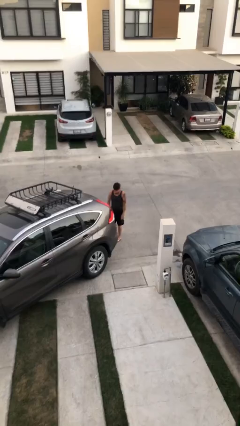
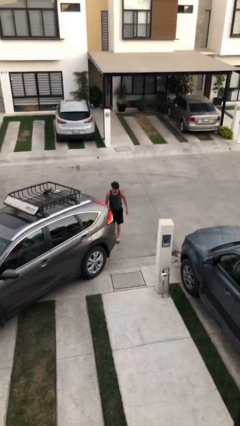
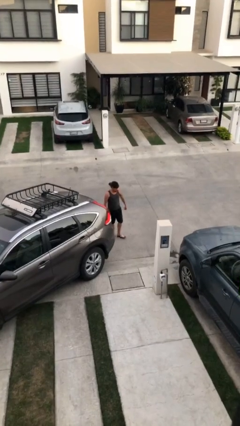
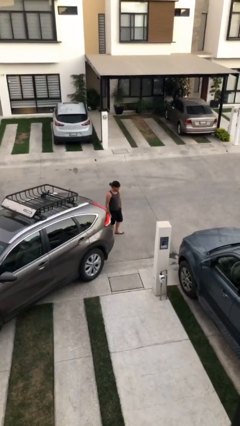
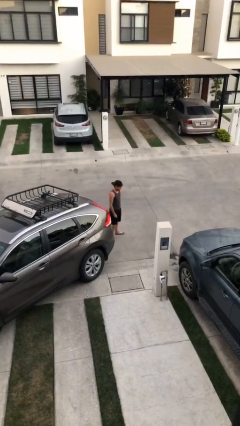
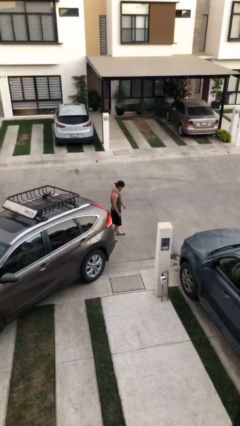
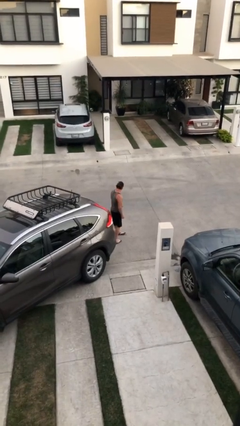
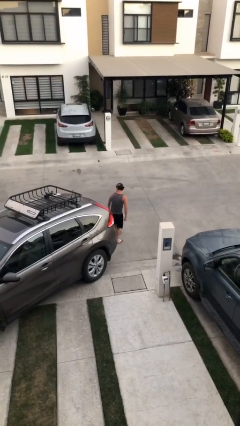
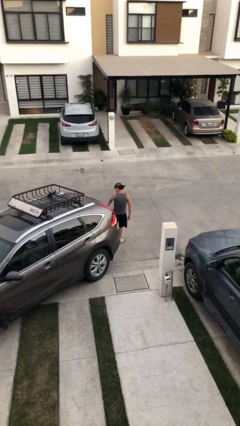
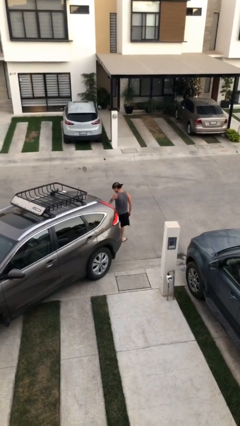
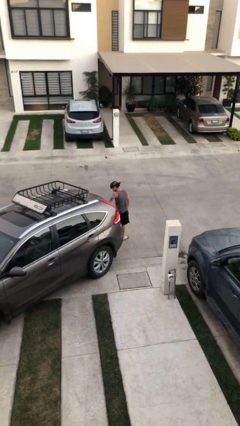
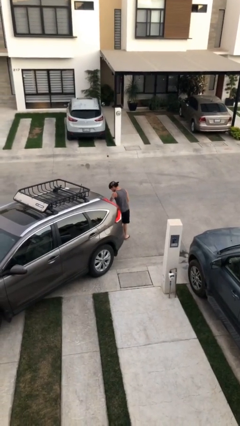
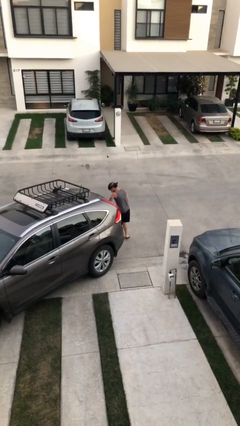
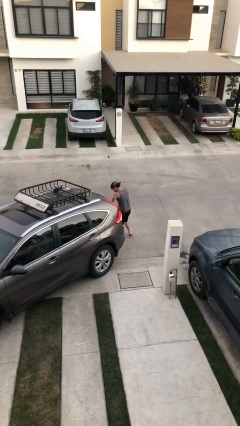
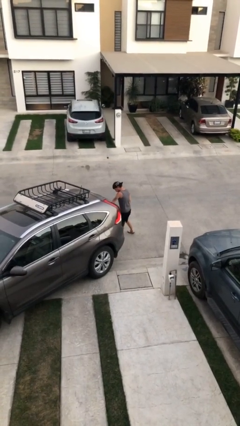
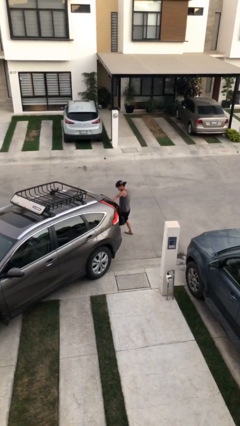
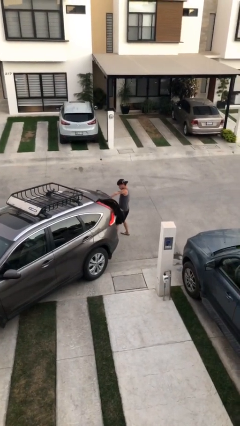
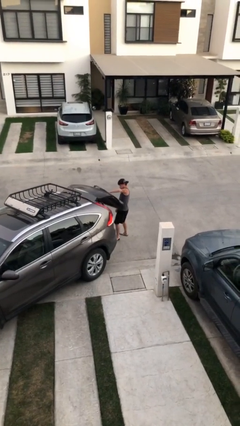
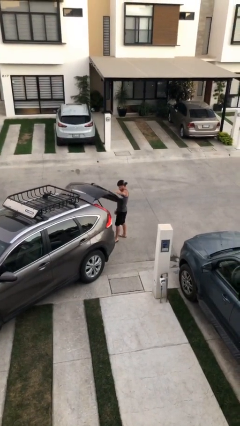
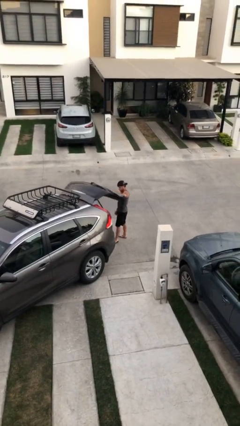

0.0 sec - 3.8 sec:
person opens car trunk

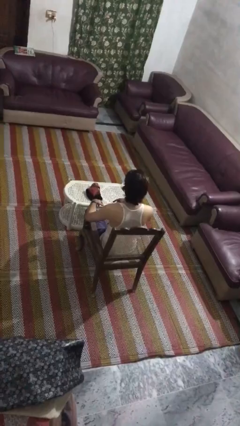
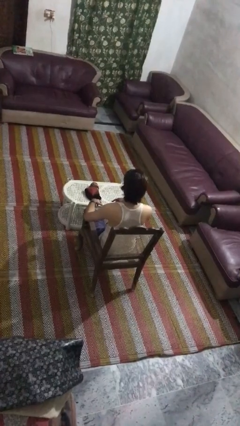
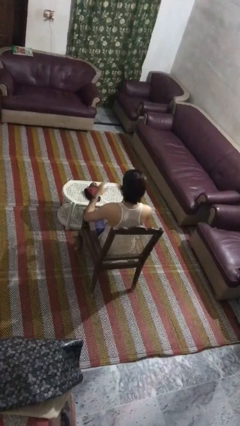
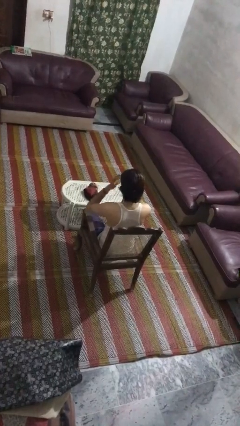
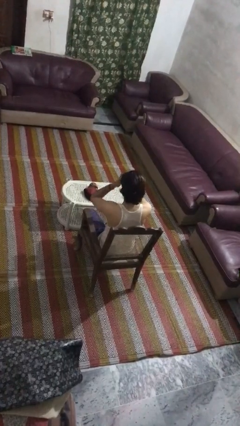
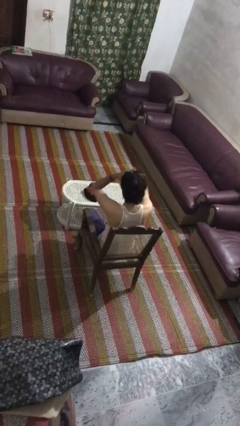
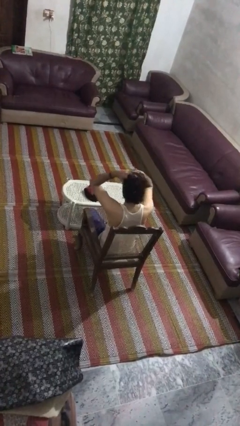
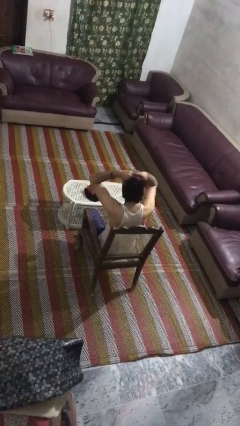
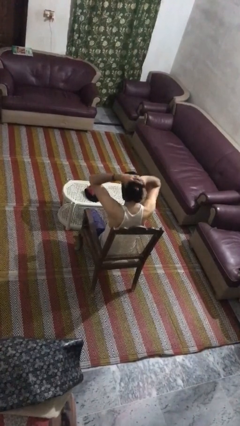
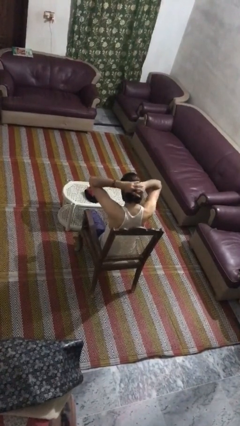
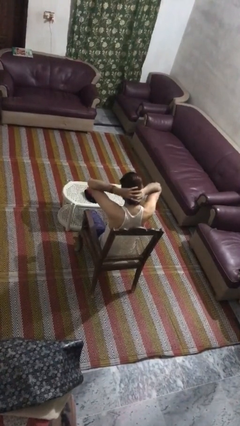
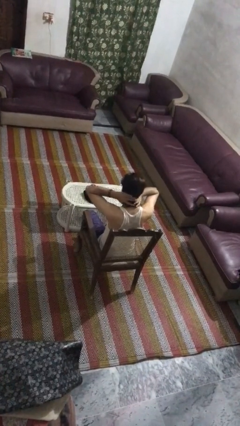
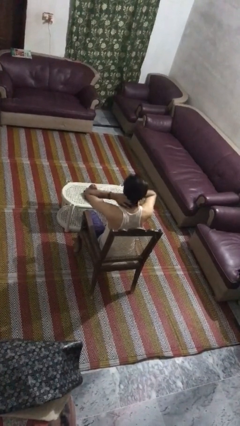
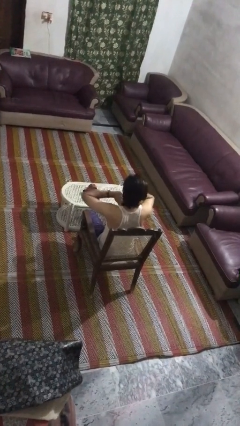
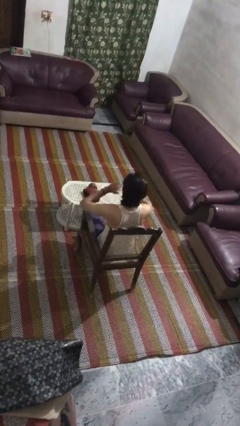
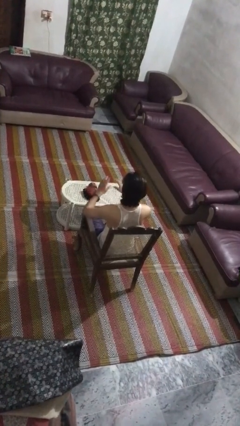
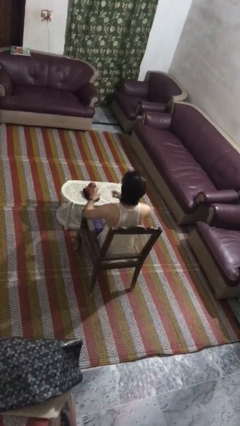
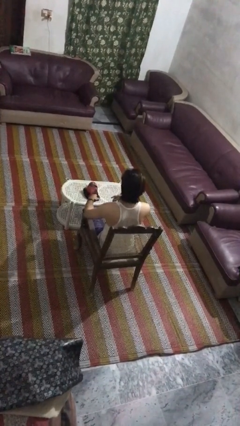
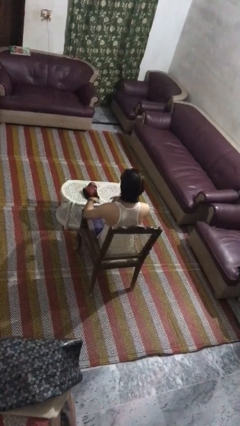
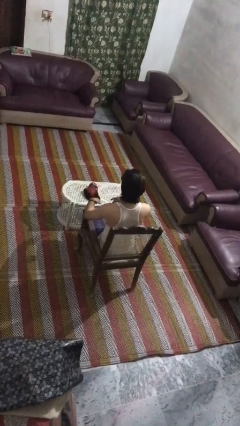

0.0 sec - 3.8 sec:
person strokes hair

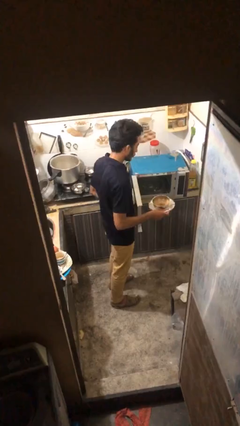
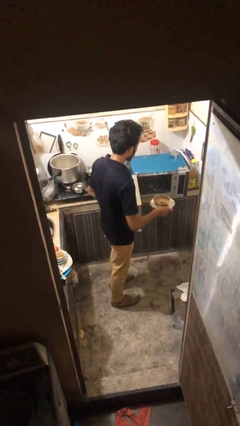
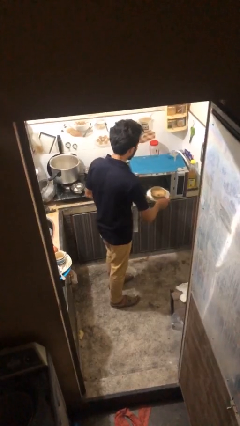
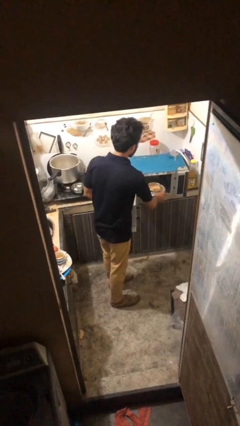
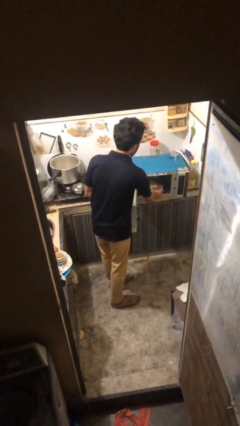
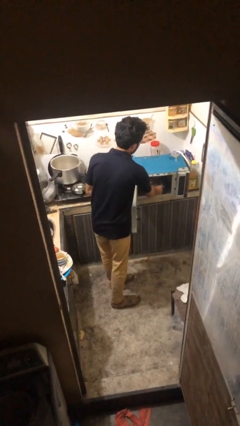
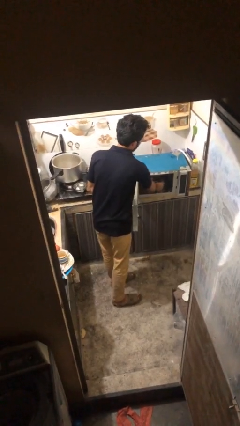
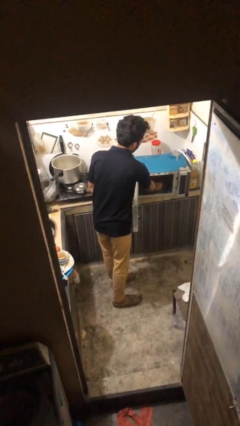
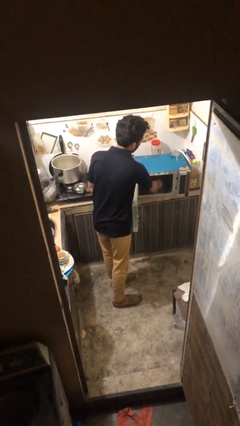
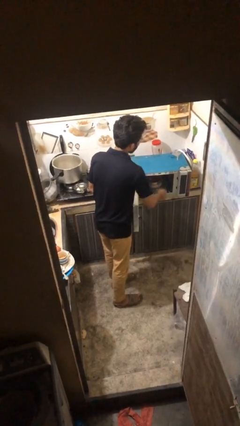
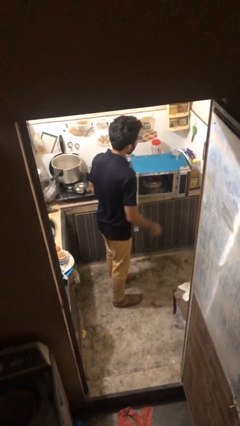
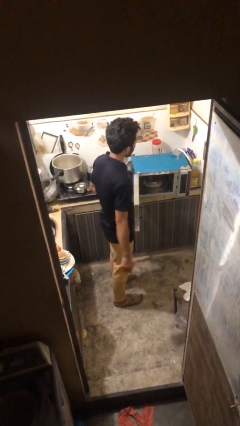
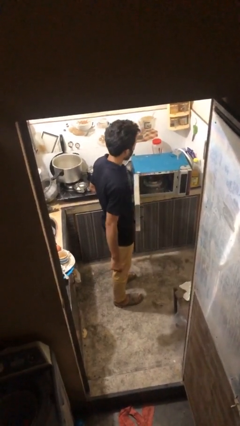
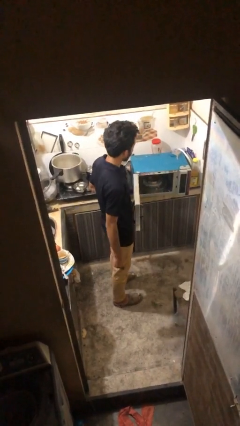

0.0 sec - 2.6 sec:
person puts object into microwave

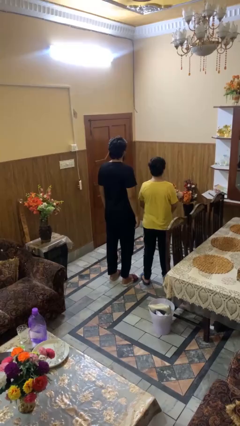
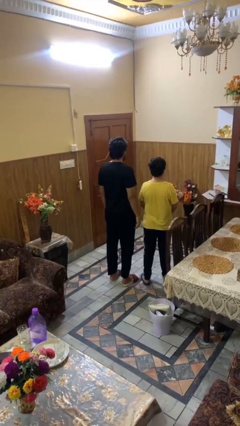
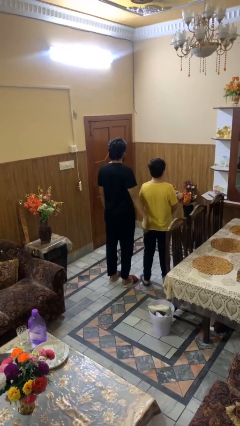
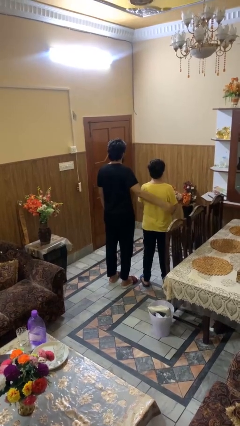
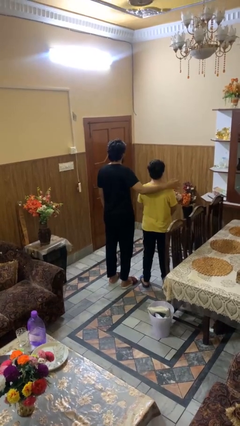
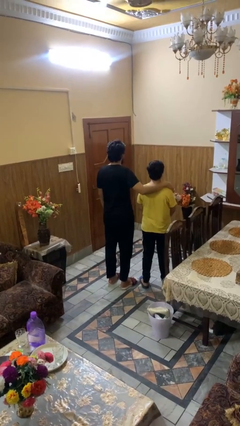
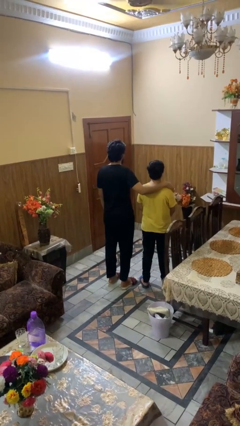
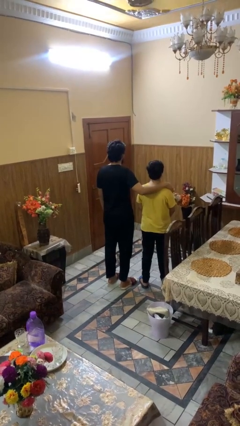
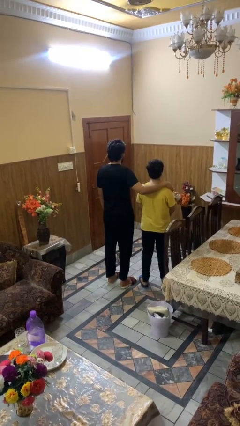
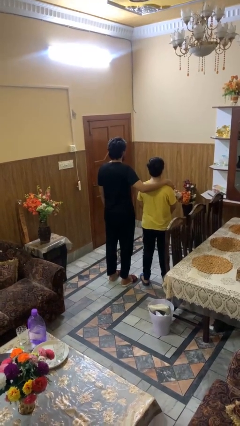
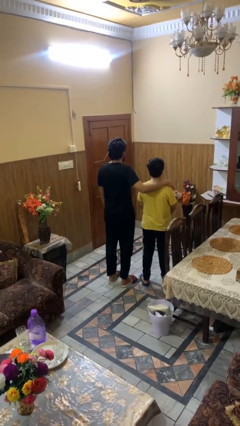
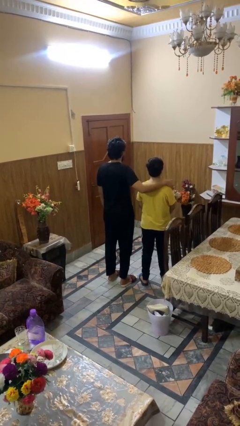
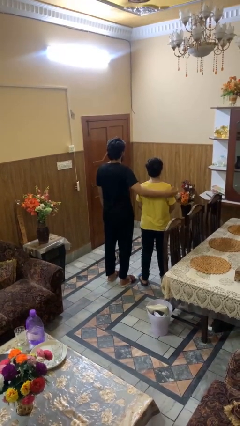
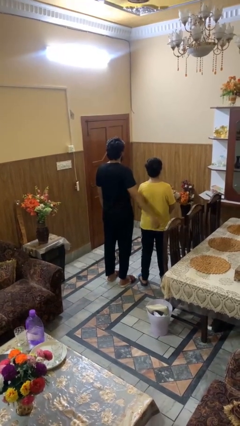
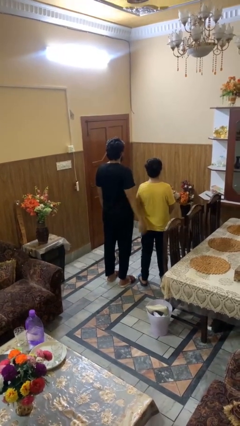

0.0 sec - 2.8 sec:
person pounds shoulders of person

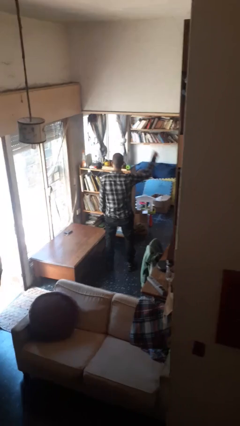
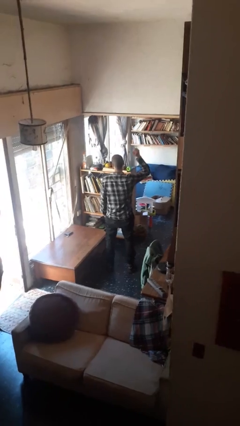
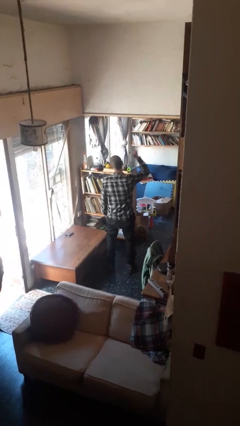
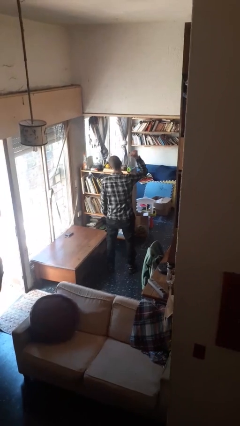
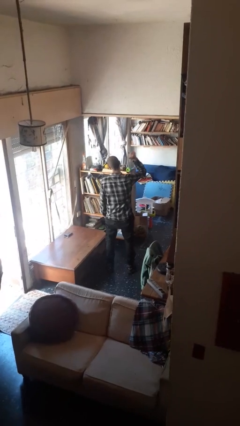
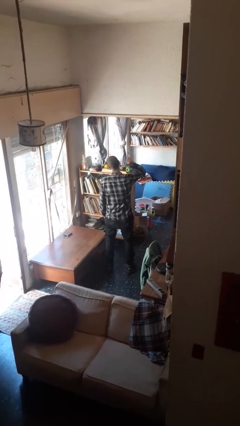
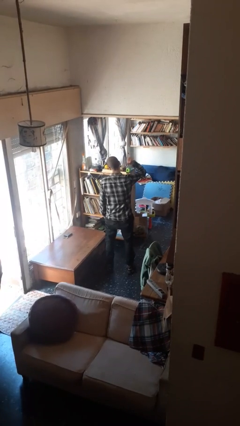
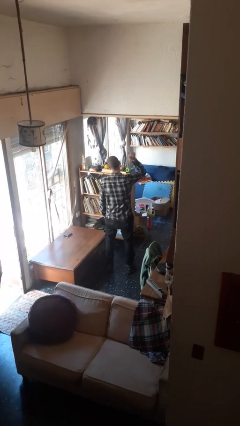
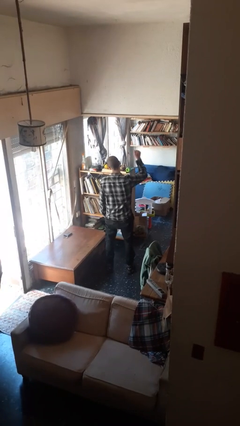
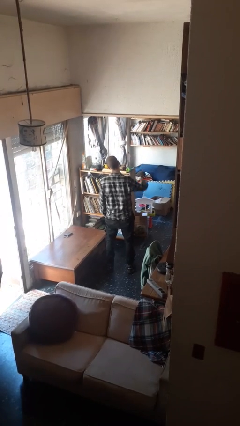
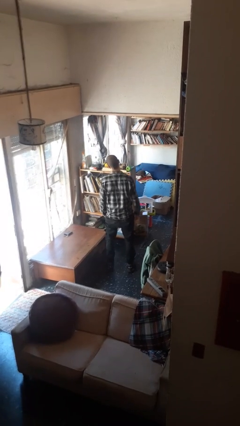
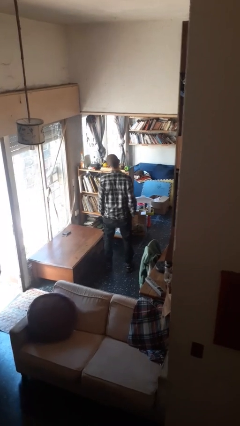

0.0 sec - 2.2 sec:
person gestures behind me

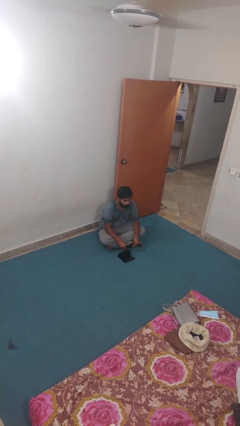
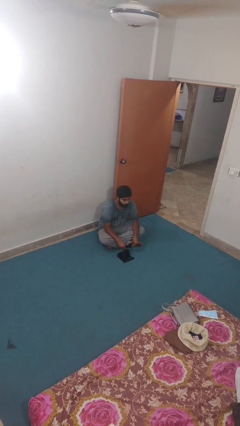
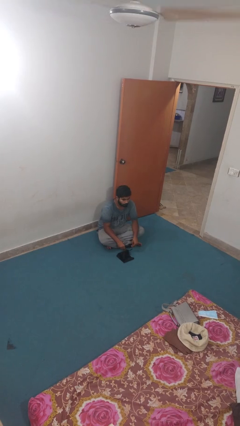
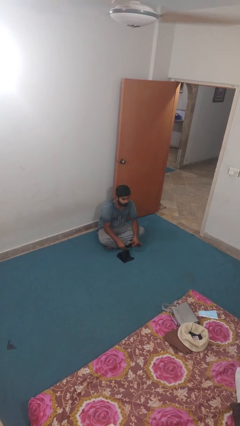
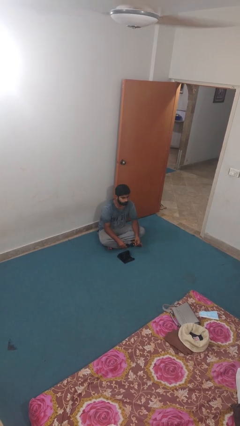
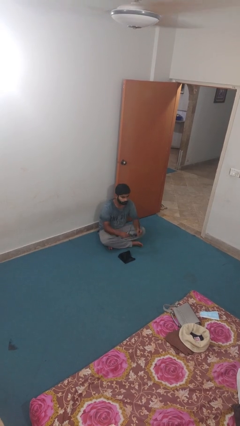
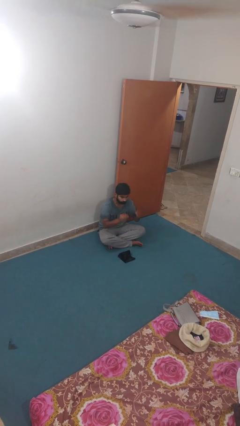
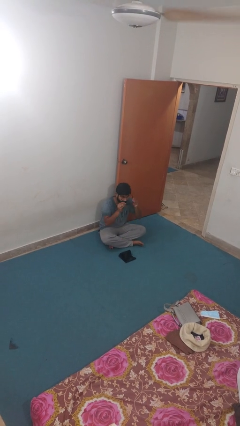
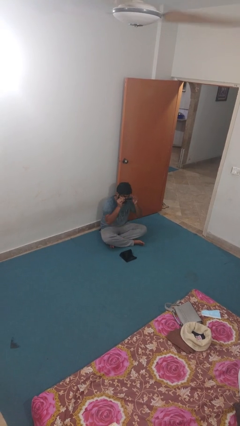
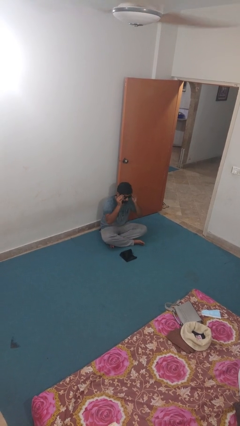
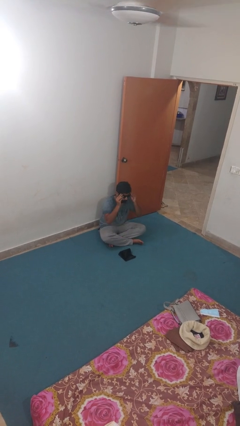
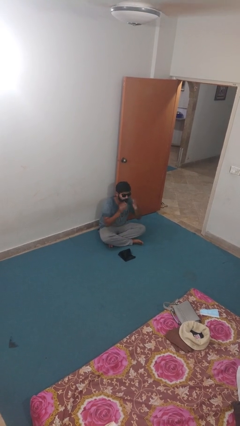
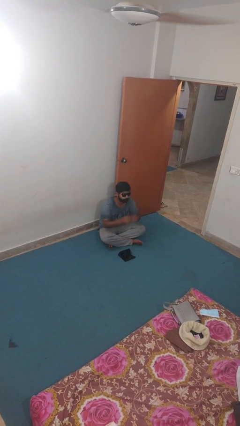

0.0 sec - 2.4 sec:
person puts on sunglasses
